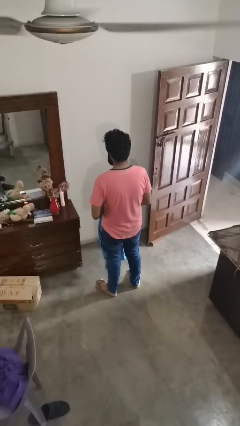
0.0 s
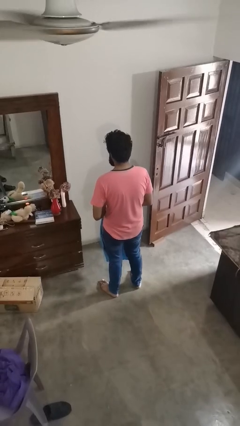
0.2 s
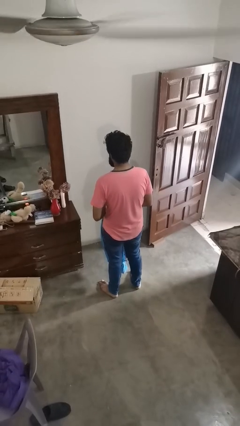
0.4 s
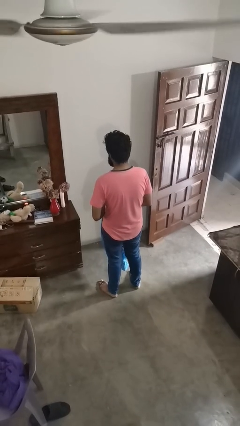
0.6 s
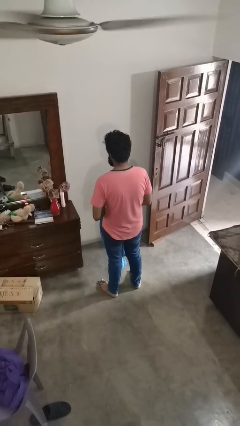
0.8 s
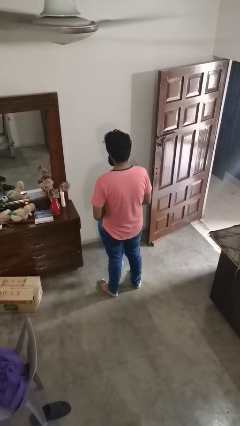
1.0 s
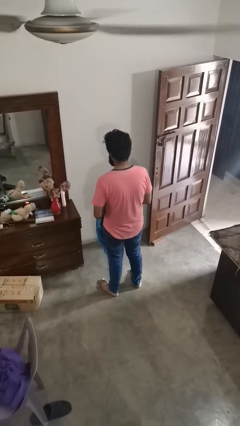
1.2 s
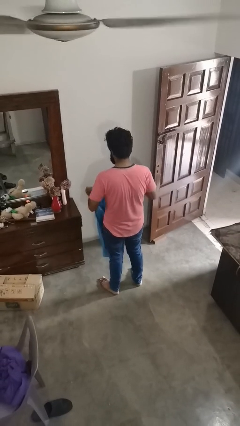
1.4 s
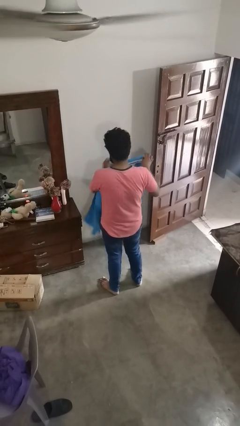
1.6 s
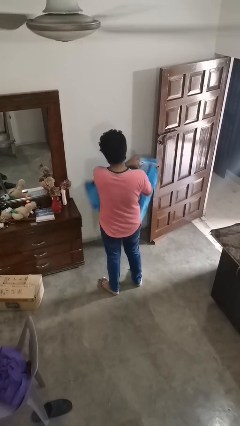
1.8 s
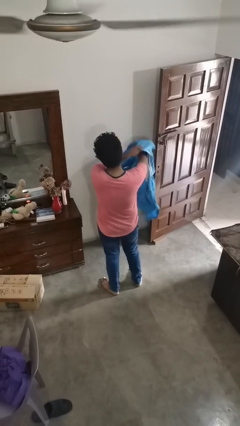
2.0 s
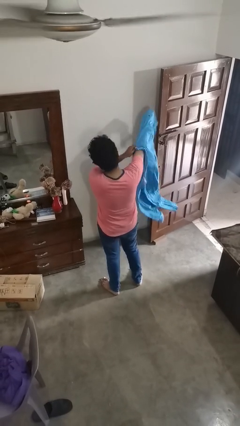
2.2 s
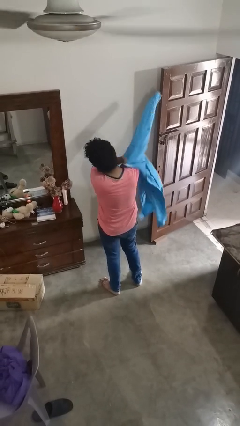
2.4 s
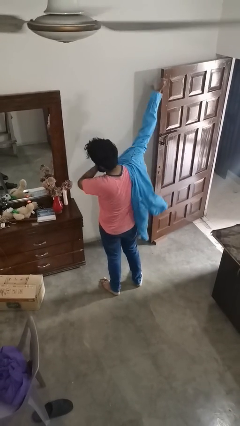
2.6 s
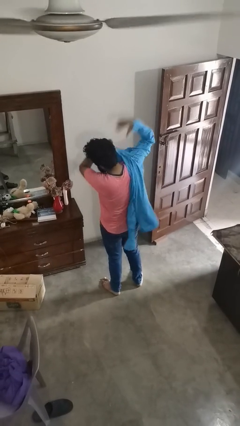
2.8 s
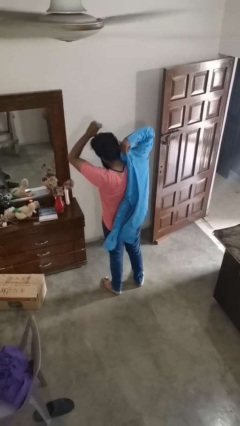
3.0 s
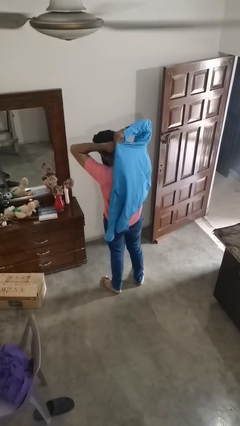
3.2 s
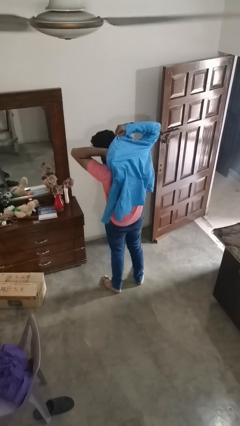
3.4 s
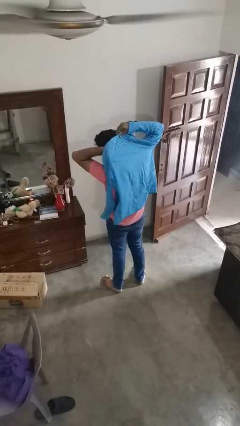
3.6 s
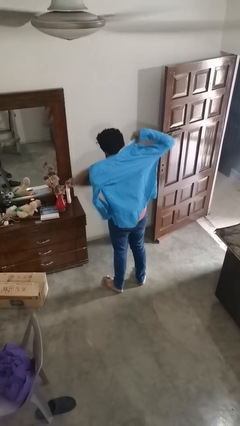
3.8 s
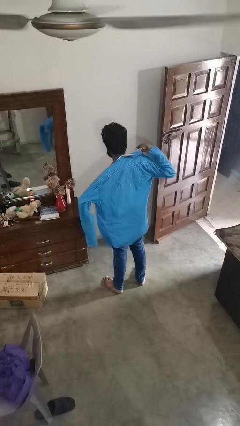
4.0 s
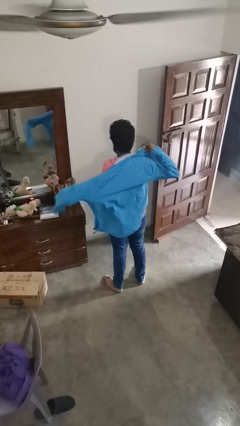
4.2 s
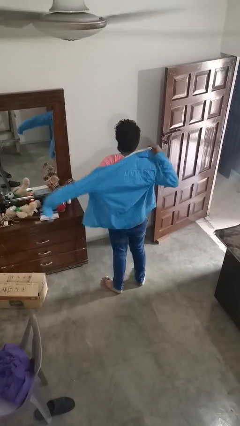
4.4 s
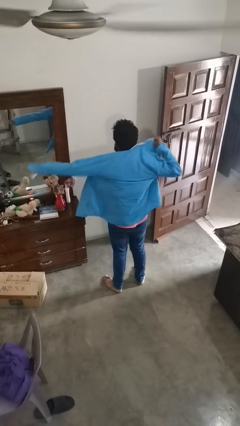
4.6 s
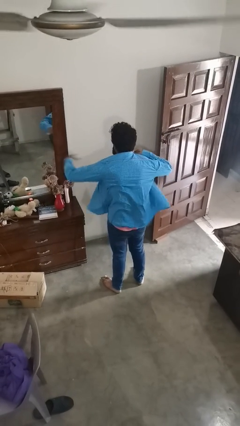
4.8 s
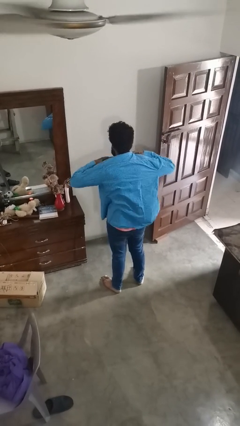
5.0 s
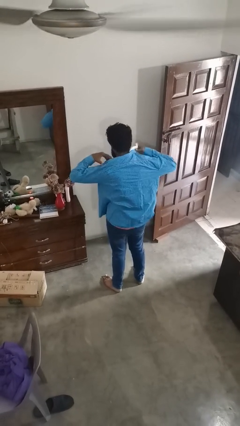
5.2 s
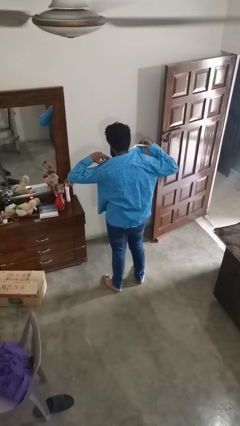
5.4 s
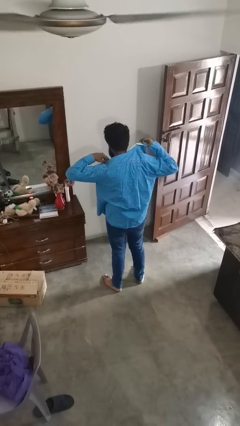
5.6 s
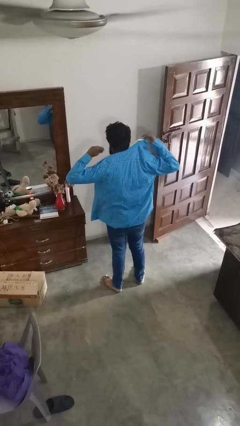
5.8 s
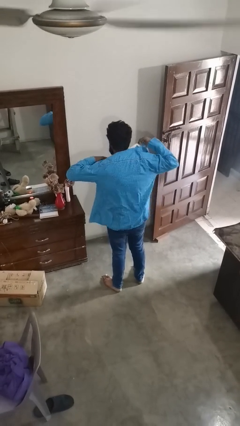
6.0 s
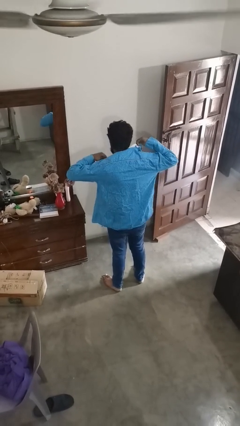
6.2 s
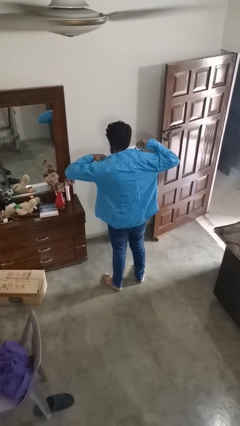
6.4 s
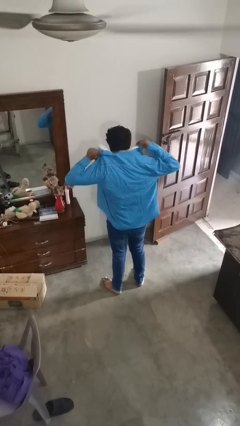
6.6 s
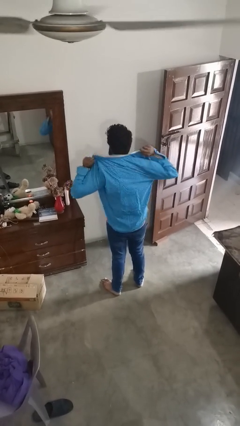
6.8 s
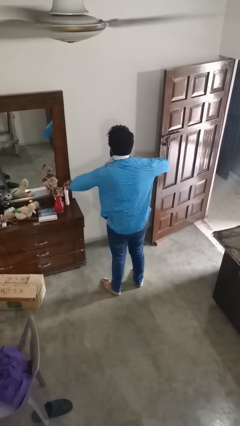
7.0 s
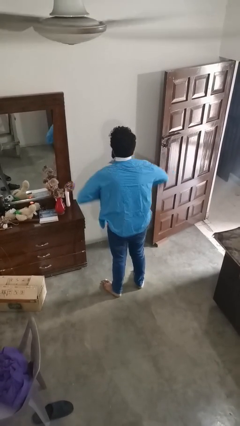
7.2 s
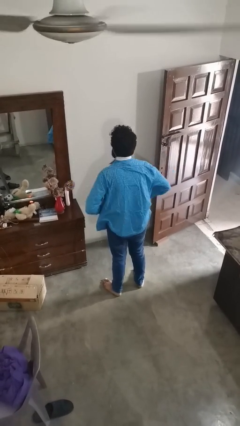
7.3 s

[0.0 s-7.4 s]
person puts on shirt

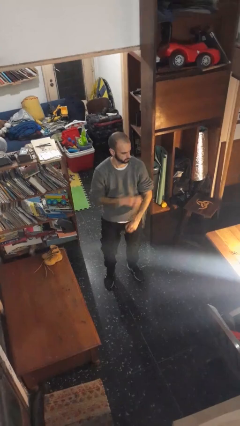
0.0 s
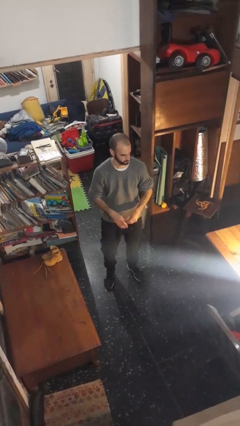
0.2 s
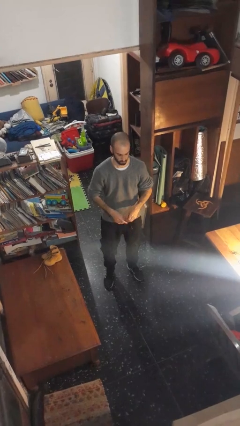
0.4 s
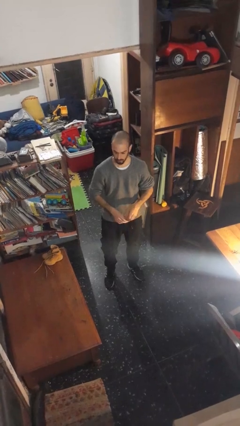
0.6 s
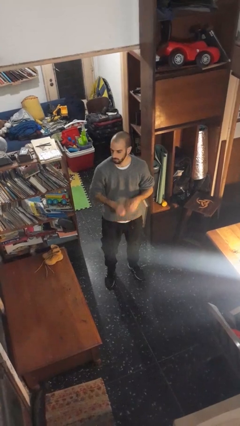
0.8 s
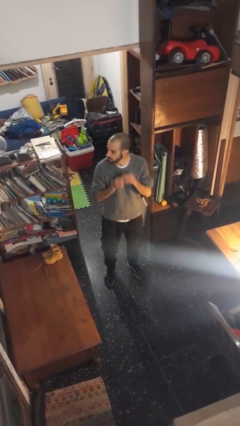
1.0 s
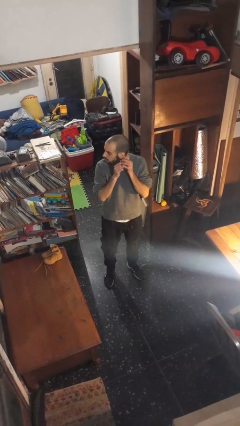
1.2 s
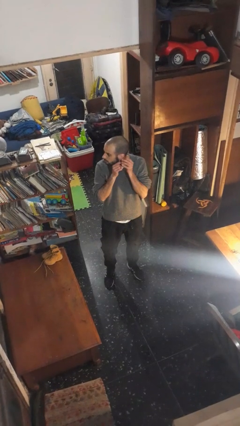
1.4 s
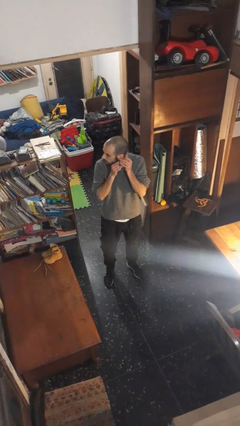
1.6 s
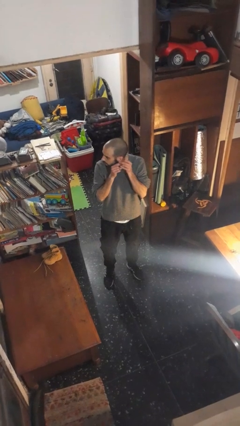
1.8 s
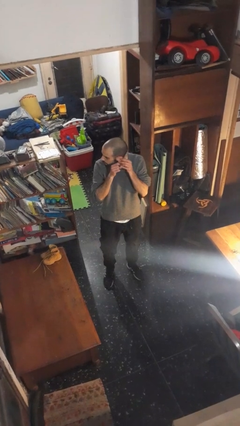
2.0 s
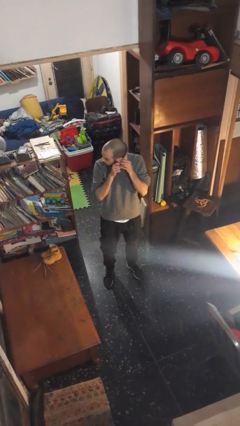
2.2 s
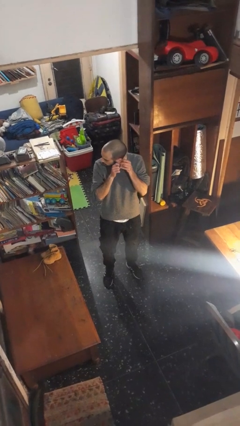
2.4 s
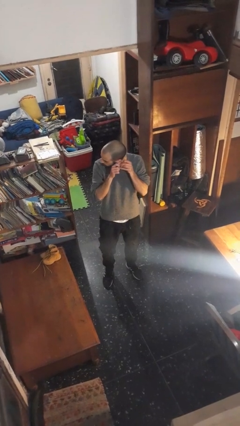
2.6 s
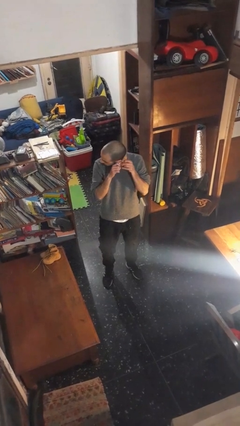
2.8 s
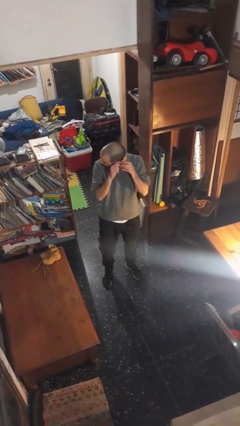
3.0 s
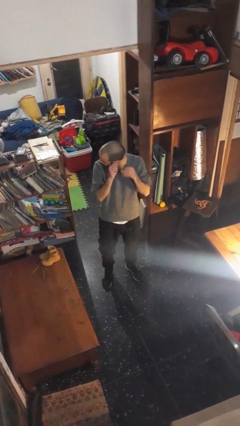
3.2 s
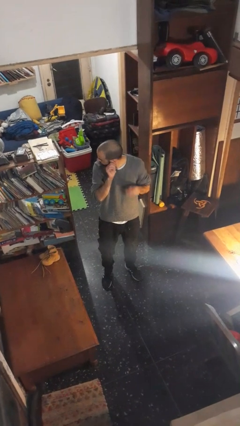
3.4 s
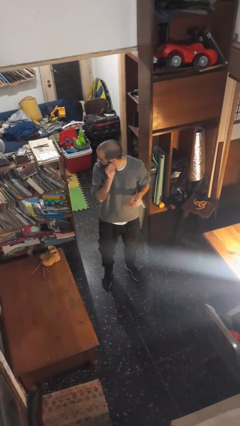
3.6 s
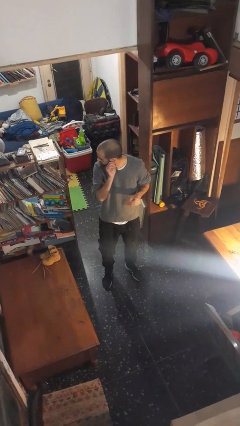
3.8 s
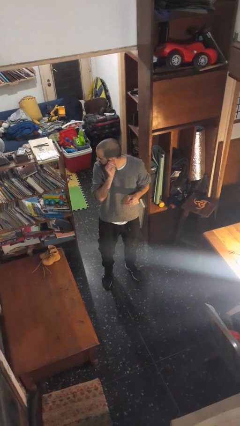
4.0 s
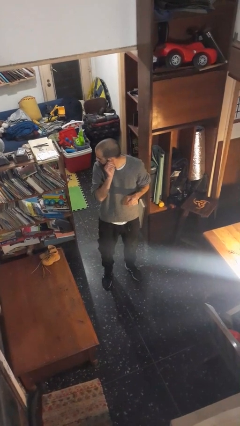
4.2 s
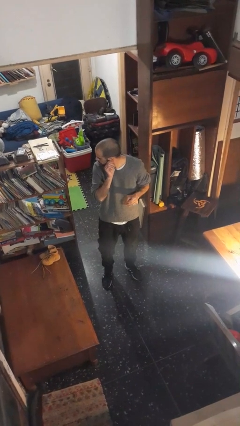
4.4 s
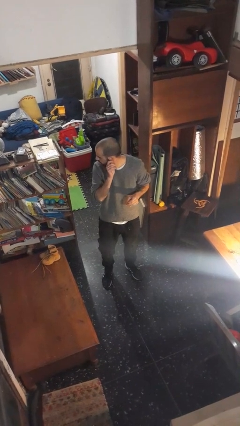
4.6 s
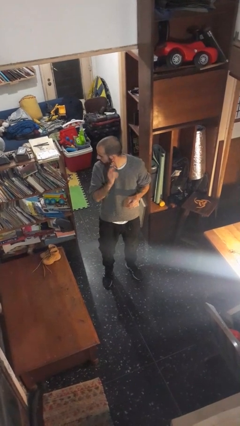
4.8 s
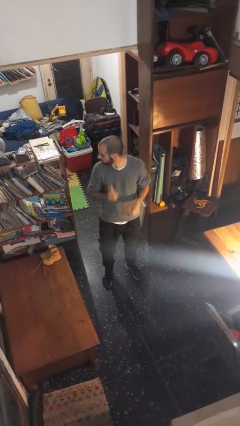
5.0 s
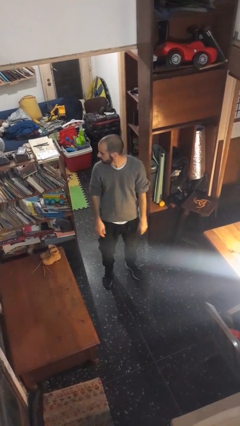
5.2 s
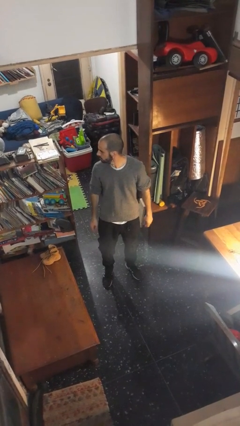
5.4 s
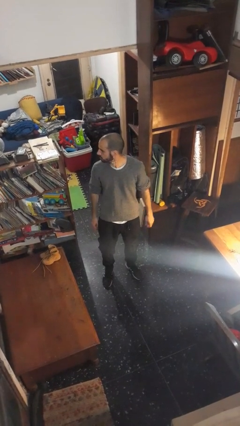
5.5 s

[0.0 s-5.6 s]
person puts on earrings

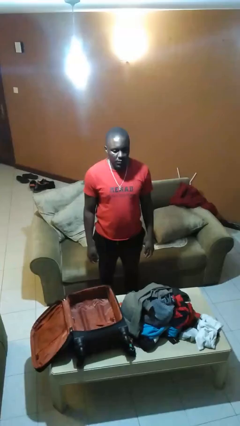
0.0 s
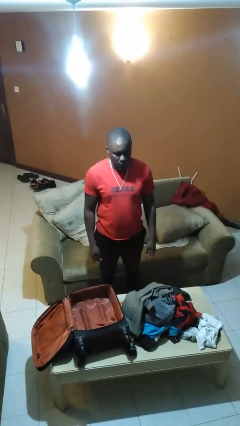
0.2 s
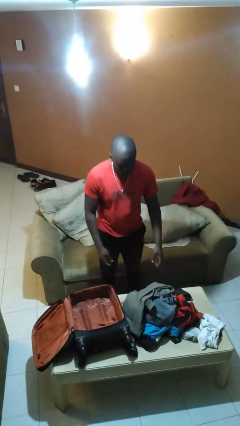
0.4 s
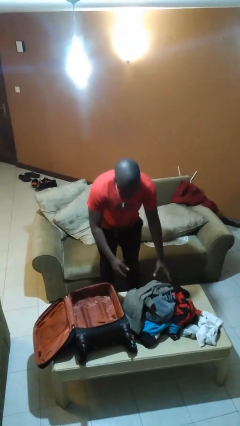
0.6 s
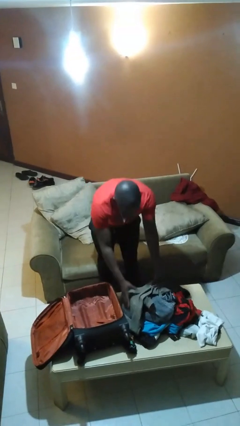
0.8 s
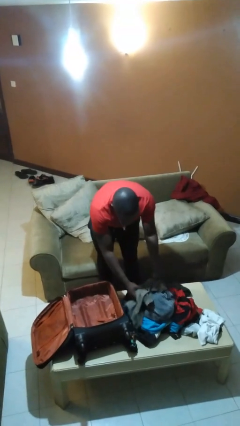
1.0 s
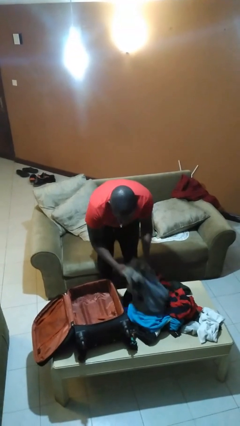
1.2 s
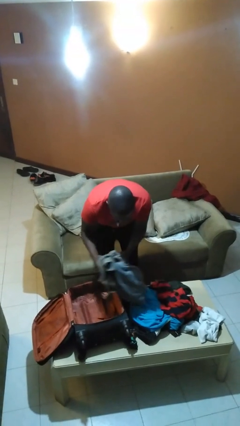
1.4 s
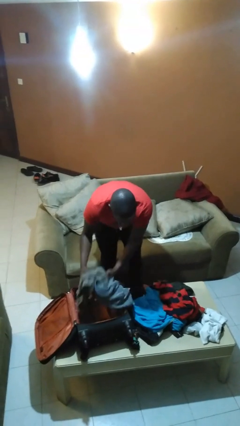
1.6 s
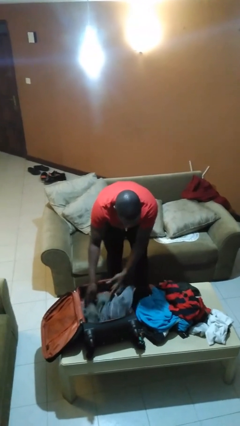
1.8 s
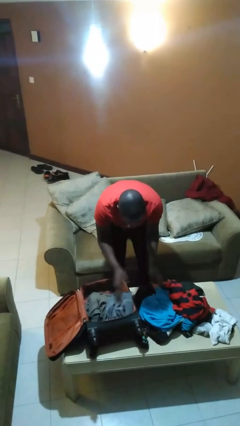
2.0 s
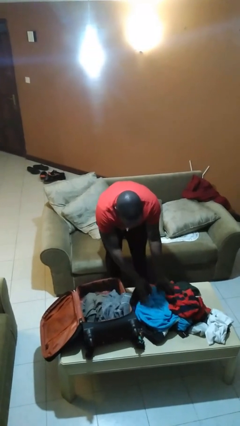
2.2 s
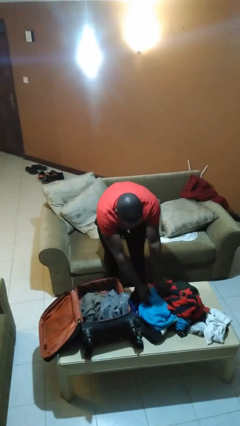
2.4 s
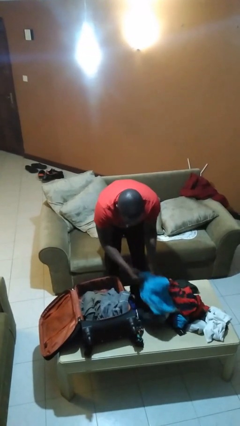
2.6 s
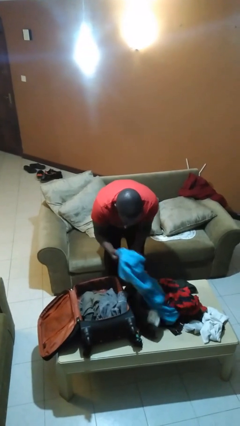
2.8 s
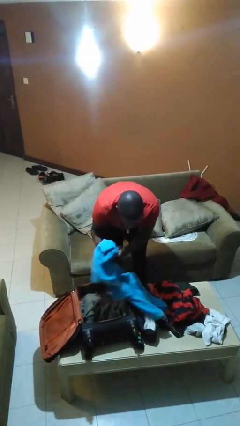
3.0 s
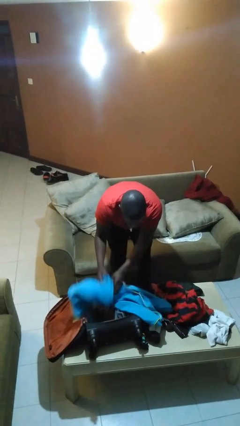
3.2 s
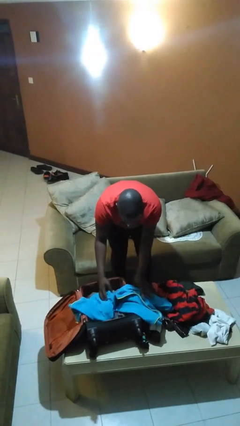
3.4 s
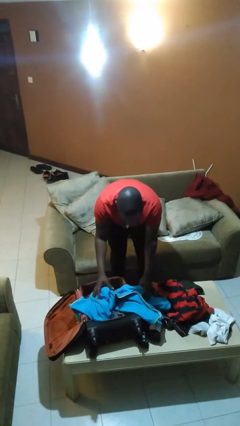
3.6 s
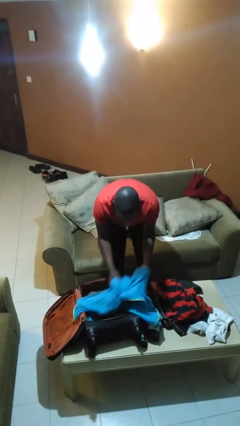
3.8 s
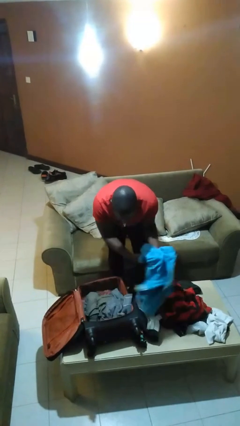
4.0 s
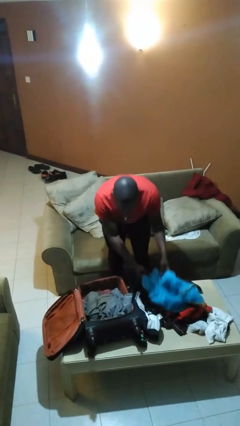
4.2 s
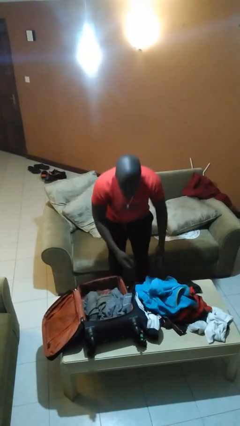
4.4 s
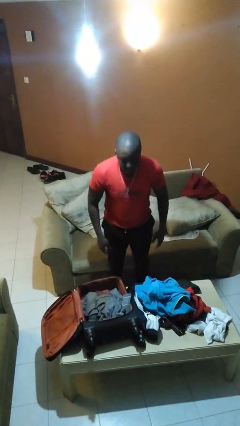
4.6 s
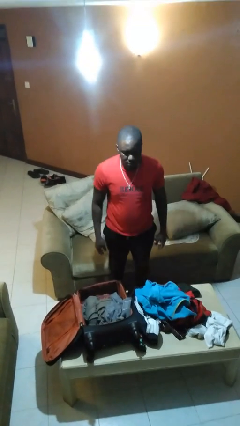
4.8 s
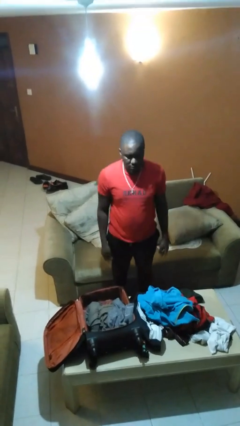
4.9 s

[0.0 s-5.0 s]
person loads clothes into suitcase
